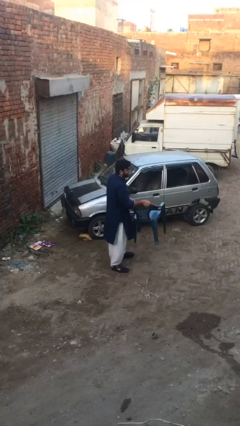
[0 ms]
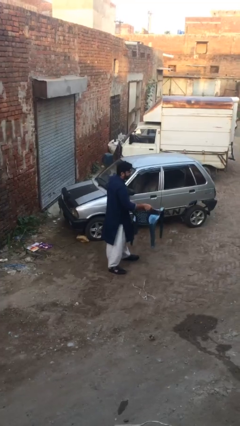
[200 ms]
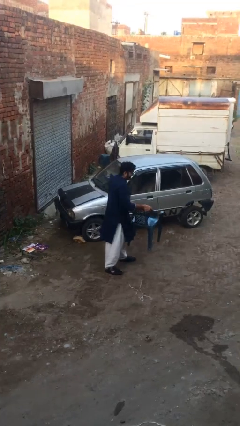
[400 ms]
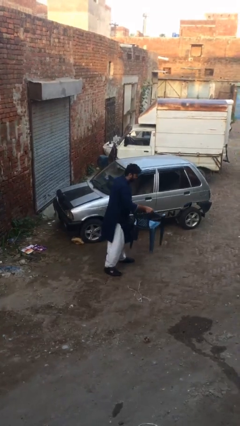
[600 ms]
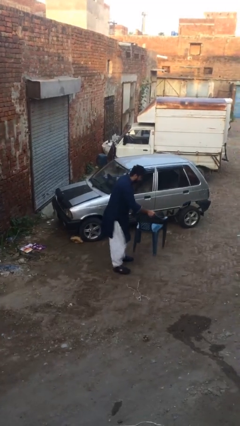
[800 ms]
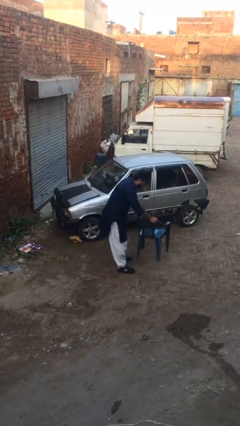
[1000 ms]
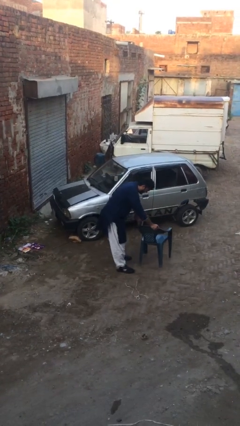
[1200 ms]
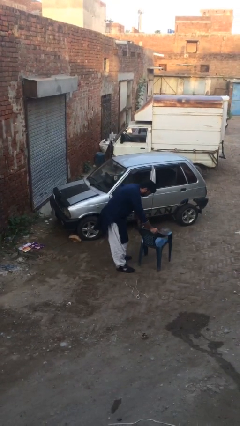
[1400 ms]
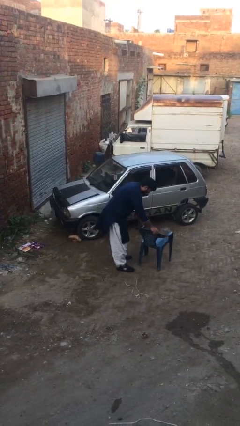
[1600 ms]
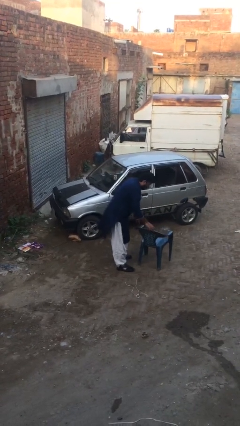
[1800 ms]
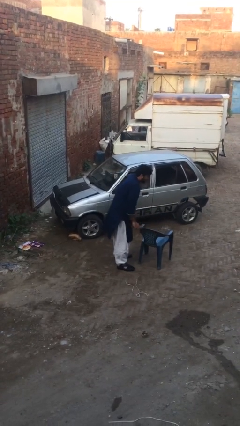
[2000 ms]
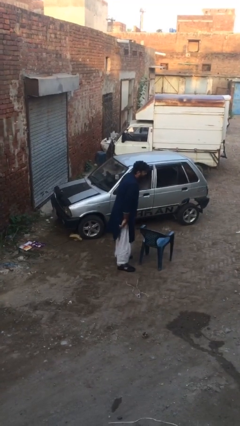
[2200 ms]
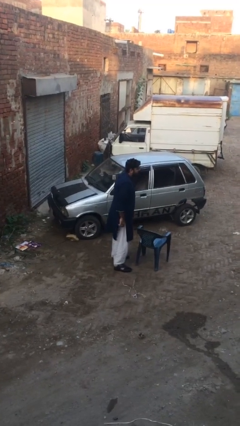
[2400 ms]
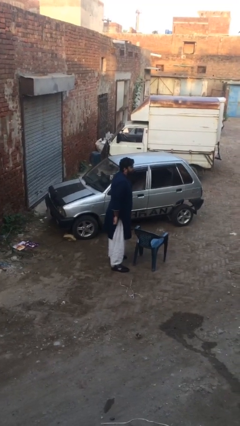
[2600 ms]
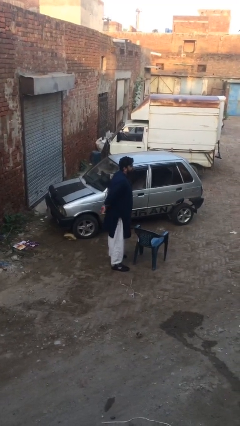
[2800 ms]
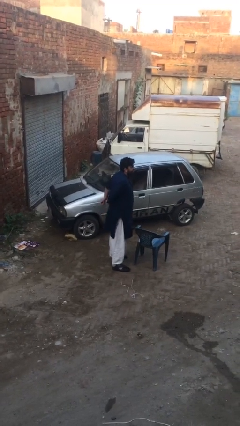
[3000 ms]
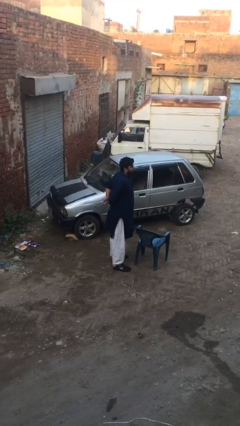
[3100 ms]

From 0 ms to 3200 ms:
person puts down object on floor

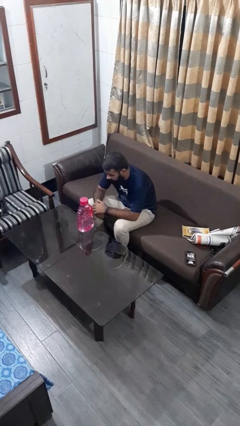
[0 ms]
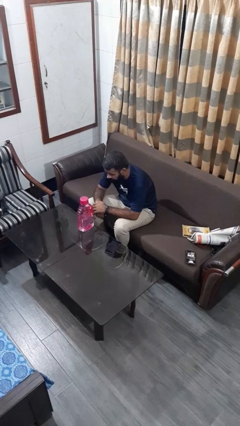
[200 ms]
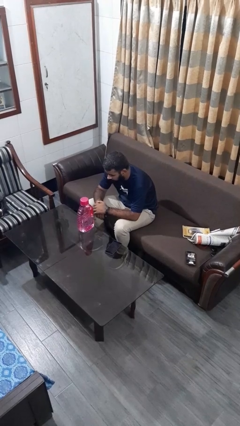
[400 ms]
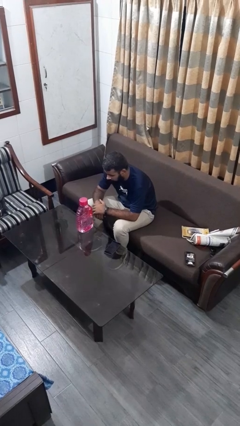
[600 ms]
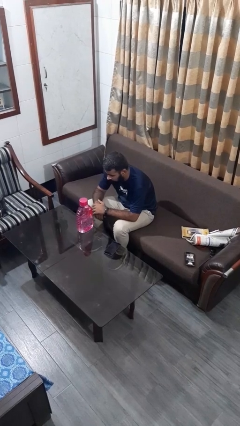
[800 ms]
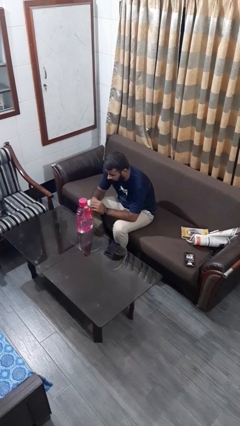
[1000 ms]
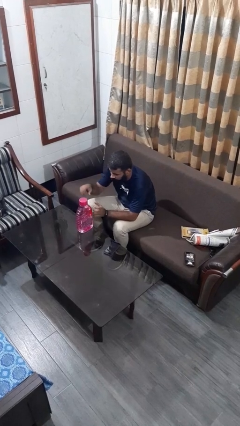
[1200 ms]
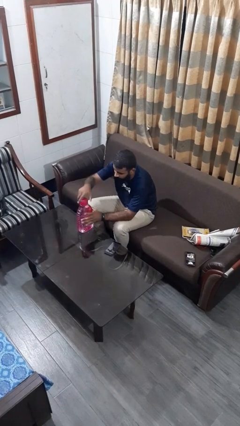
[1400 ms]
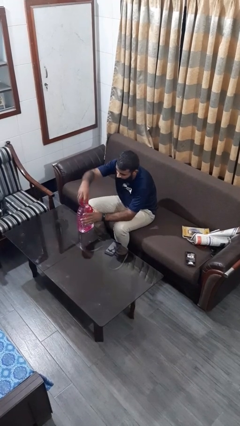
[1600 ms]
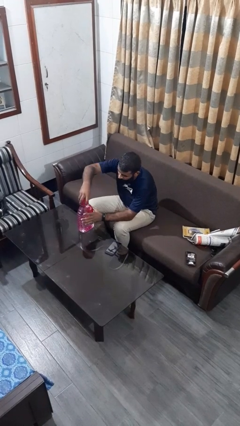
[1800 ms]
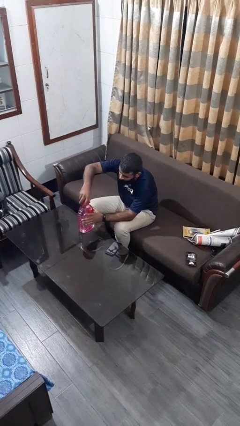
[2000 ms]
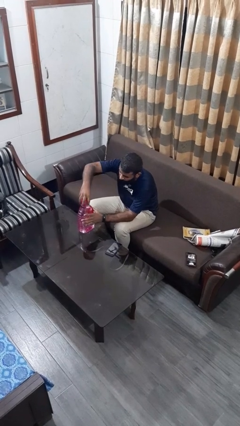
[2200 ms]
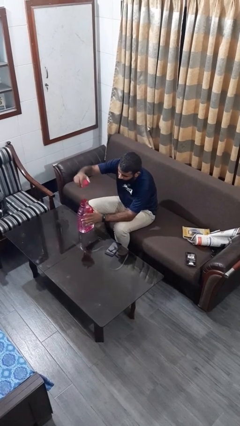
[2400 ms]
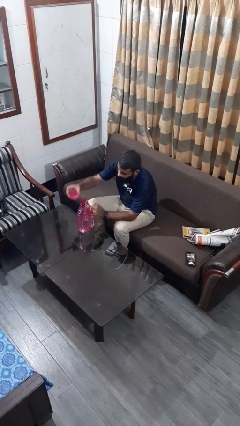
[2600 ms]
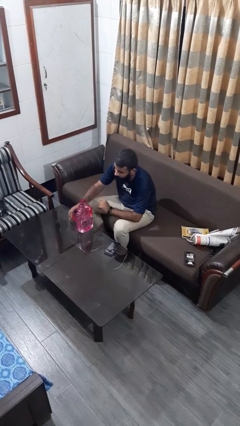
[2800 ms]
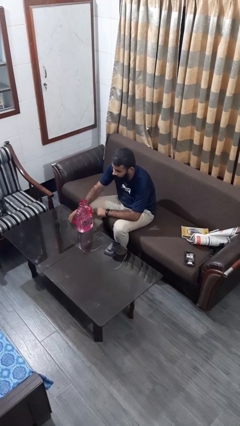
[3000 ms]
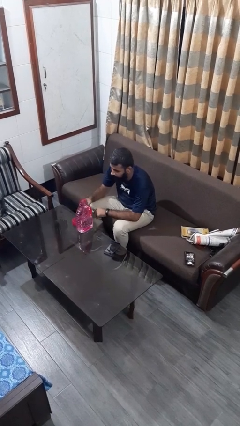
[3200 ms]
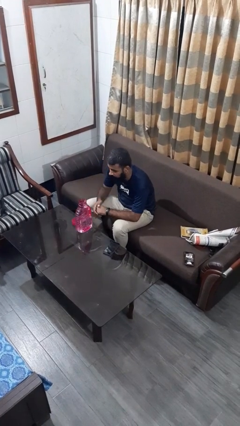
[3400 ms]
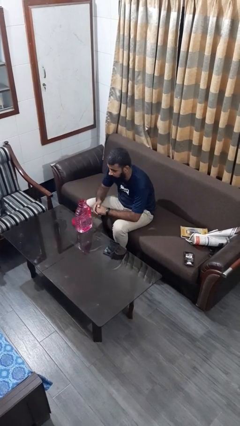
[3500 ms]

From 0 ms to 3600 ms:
person unscrews lid from bottle

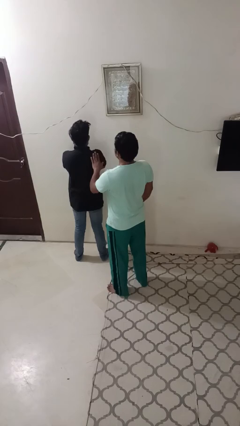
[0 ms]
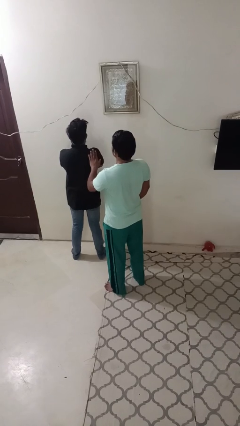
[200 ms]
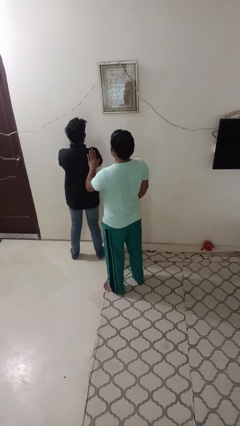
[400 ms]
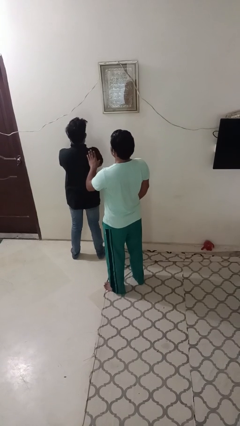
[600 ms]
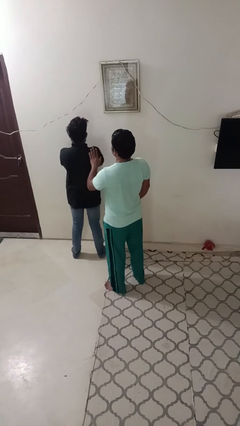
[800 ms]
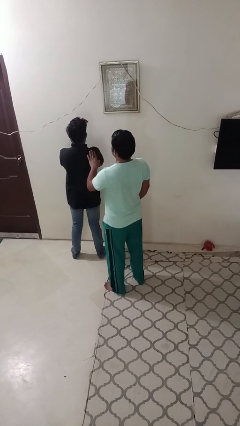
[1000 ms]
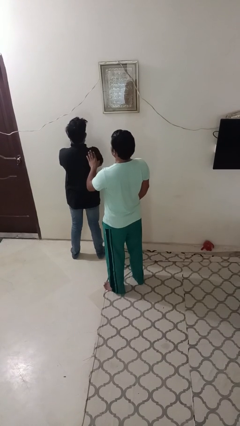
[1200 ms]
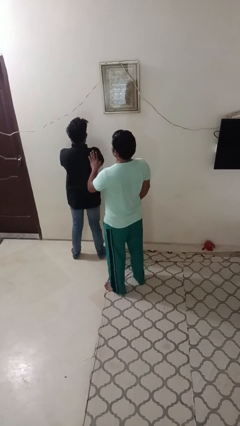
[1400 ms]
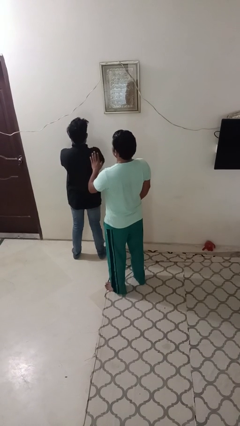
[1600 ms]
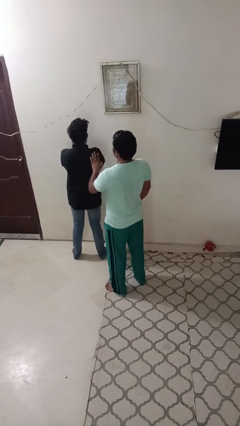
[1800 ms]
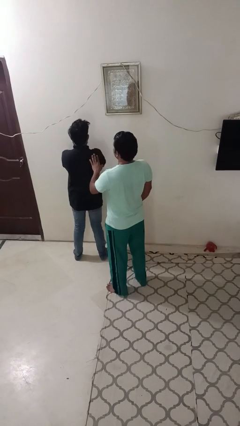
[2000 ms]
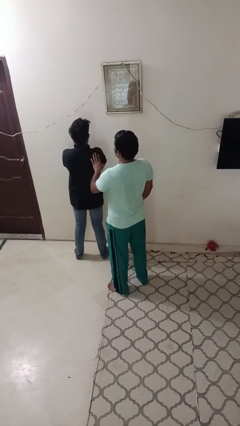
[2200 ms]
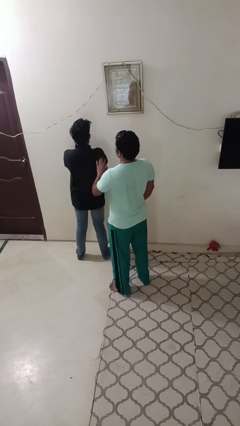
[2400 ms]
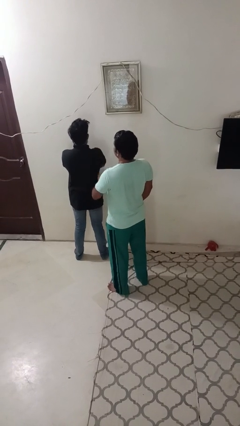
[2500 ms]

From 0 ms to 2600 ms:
person touches back of person

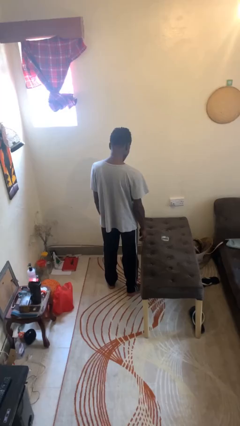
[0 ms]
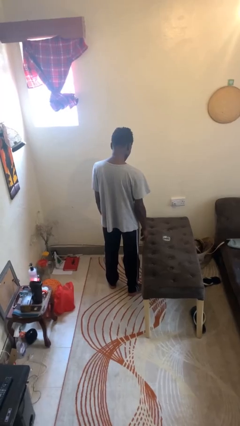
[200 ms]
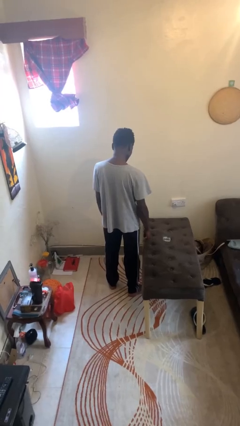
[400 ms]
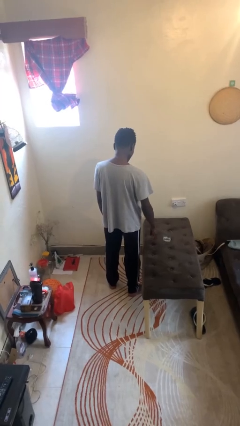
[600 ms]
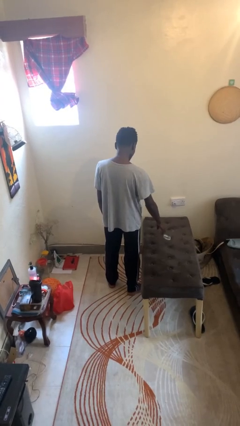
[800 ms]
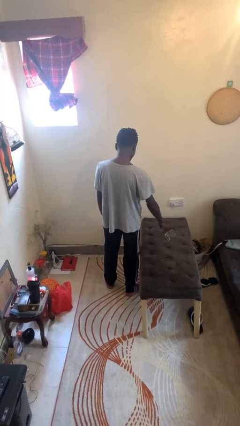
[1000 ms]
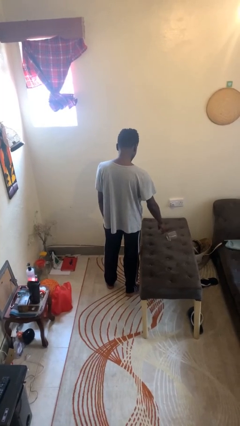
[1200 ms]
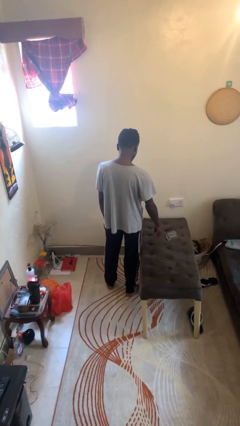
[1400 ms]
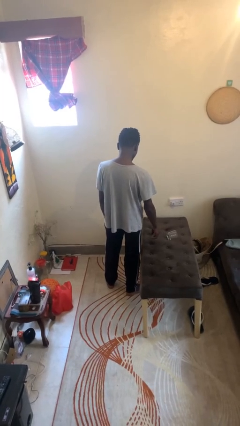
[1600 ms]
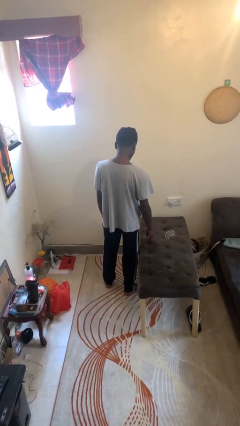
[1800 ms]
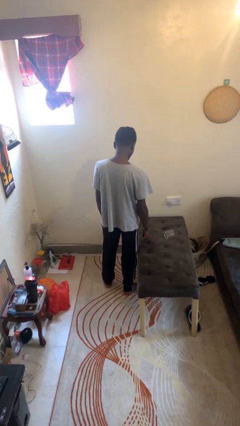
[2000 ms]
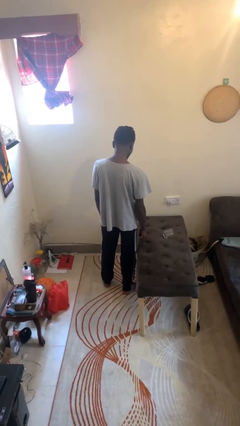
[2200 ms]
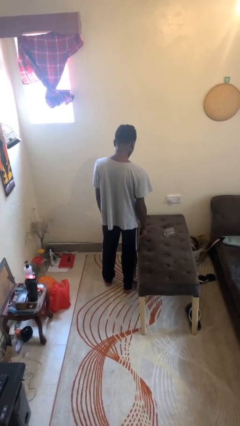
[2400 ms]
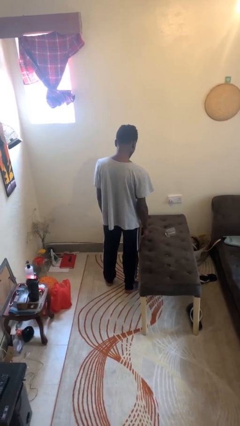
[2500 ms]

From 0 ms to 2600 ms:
person knocks over glass

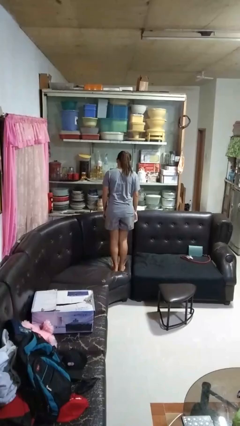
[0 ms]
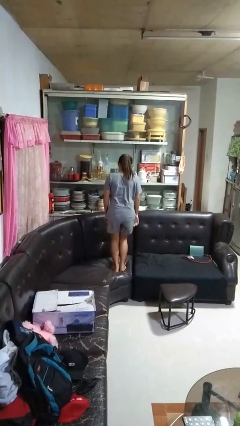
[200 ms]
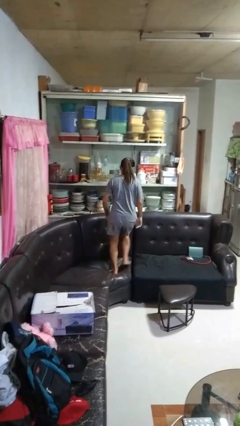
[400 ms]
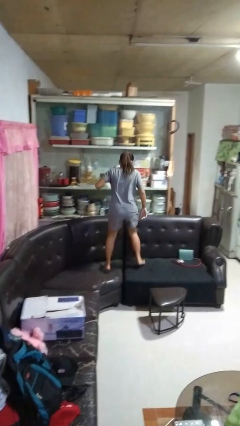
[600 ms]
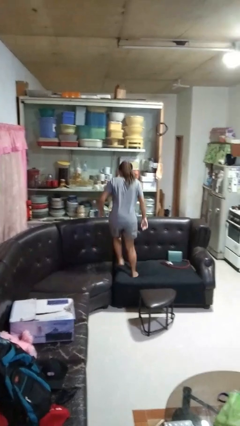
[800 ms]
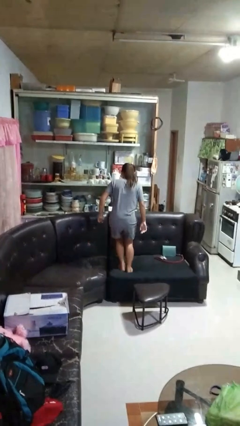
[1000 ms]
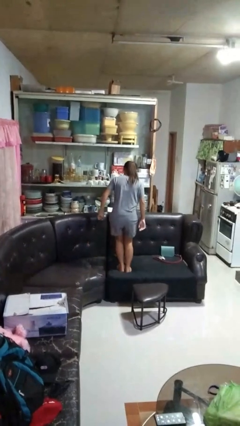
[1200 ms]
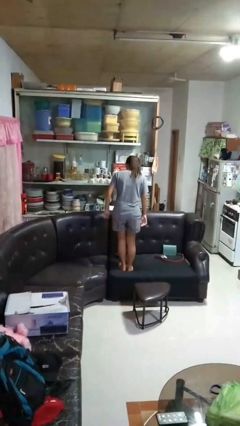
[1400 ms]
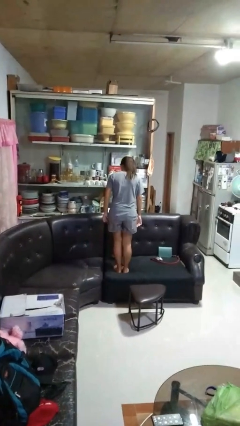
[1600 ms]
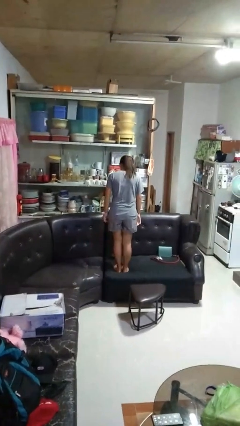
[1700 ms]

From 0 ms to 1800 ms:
person jumps on couch

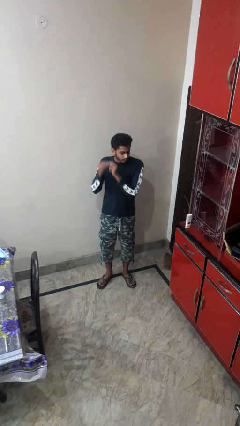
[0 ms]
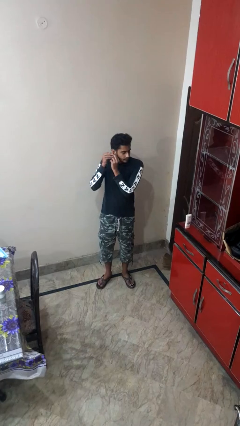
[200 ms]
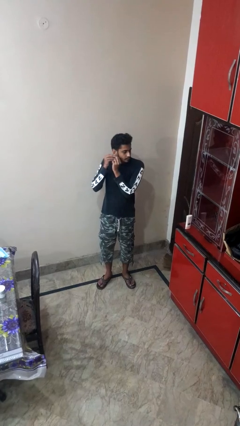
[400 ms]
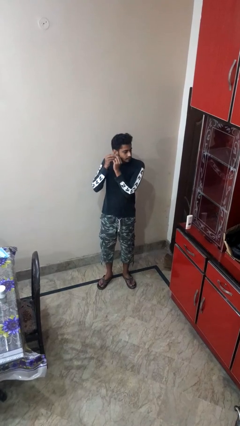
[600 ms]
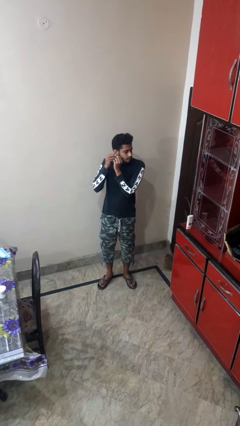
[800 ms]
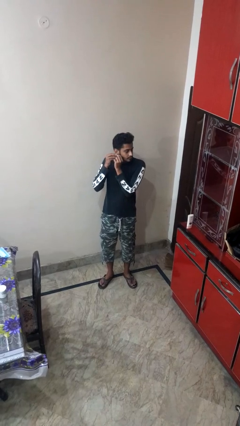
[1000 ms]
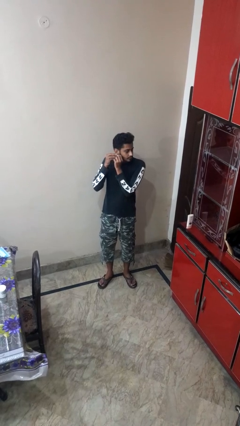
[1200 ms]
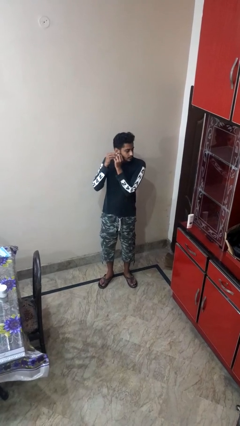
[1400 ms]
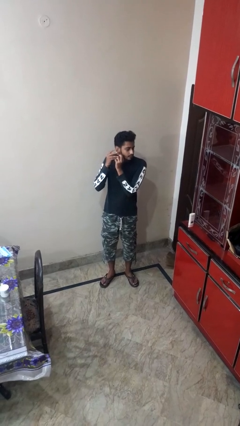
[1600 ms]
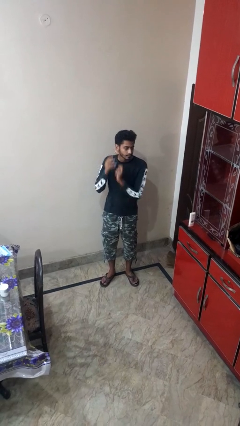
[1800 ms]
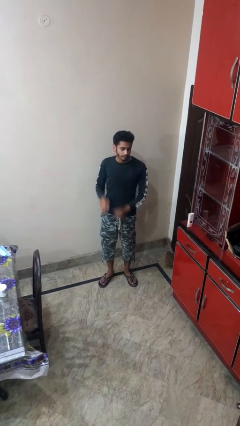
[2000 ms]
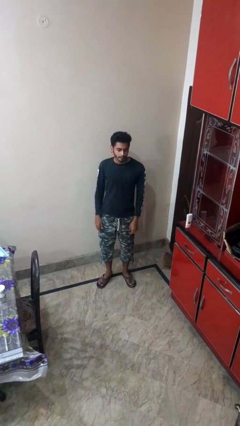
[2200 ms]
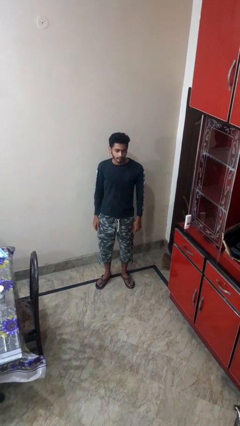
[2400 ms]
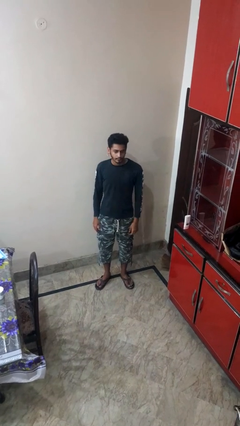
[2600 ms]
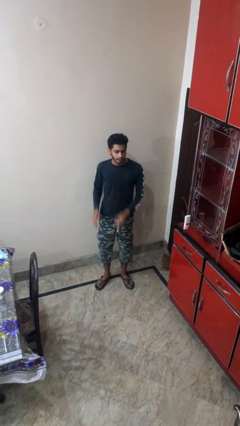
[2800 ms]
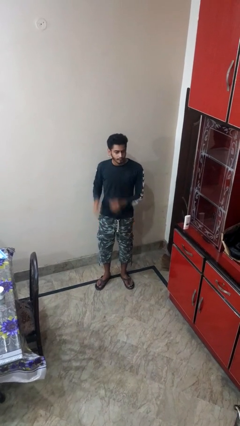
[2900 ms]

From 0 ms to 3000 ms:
person puts on earrings

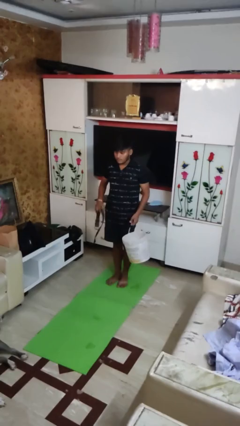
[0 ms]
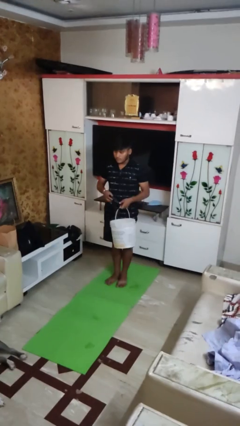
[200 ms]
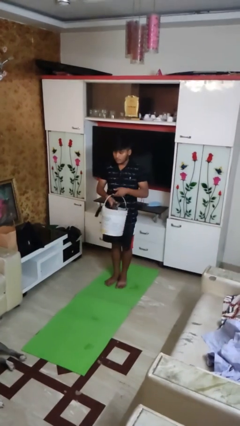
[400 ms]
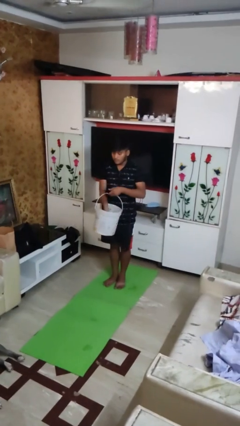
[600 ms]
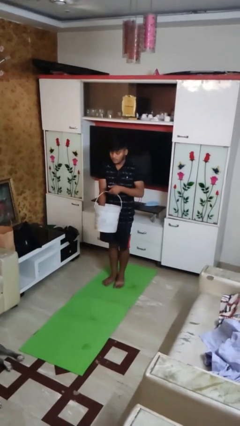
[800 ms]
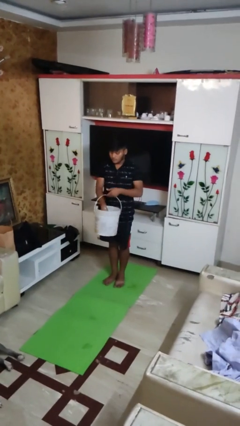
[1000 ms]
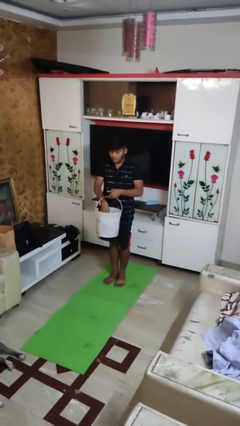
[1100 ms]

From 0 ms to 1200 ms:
person puts object into basket
